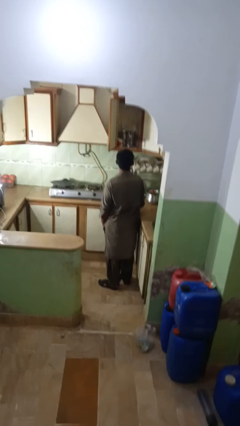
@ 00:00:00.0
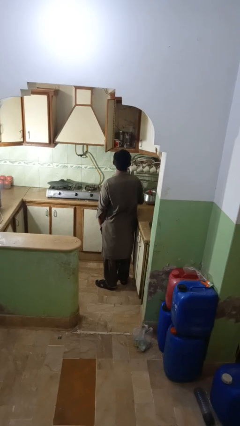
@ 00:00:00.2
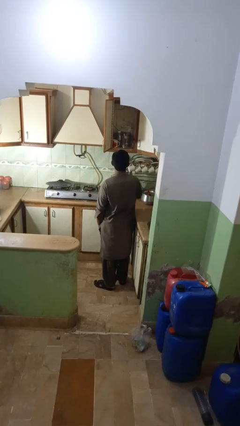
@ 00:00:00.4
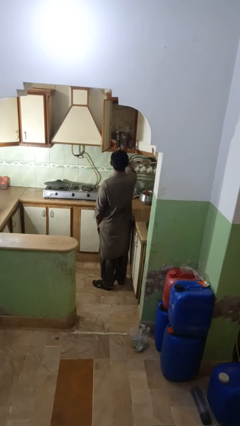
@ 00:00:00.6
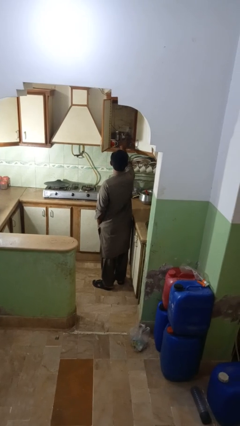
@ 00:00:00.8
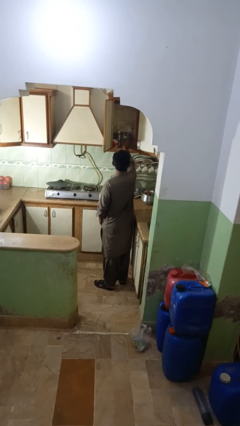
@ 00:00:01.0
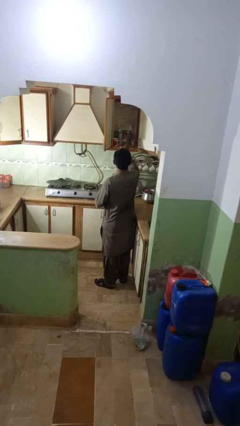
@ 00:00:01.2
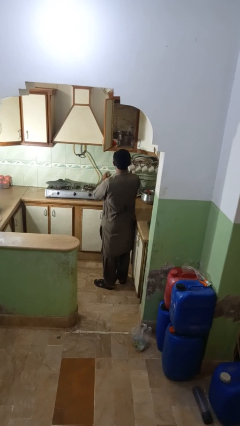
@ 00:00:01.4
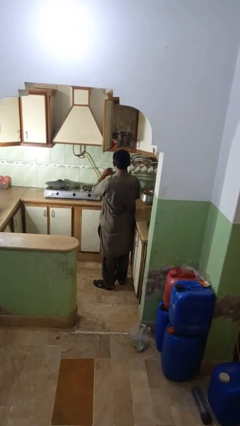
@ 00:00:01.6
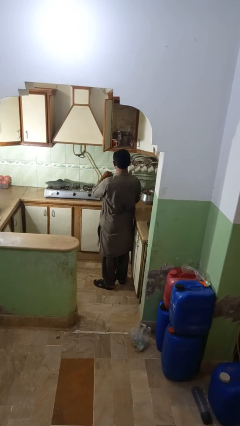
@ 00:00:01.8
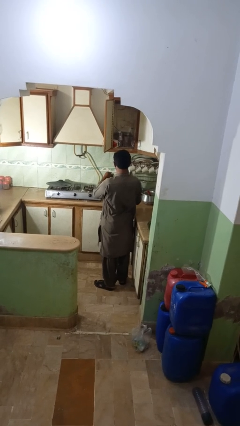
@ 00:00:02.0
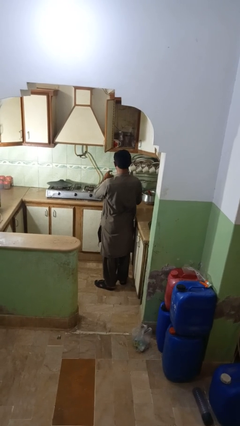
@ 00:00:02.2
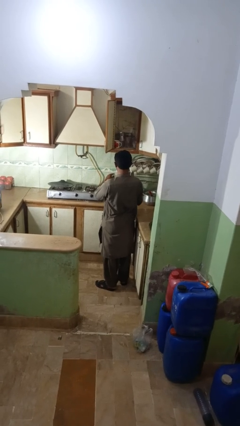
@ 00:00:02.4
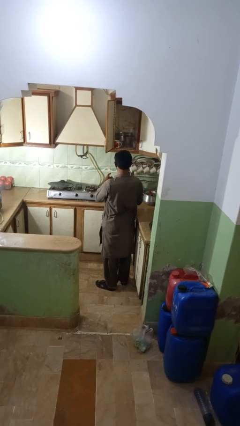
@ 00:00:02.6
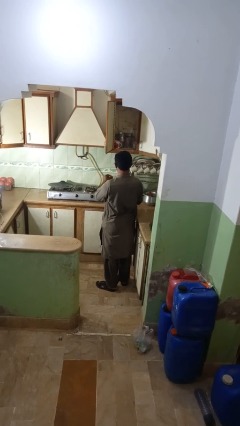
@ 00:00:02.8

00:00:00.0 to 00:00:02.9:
person takes object from kitchen drawer

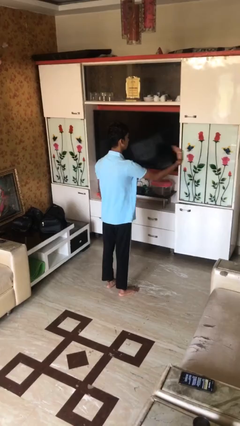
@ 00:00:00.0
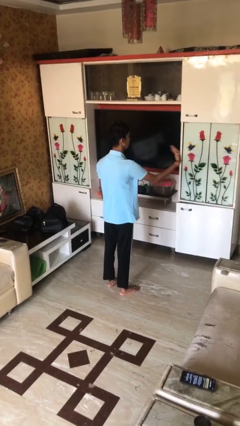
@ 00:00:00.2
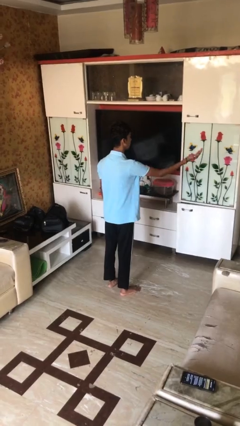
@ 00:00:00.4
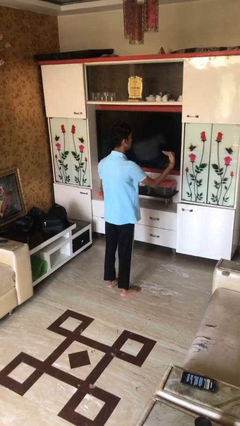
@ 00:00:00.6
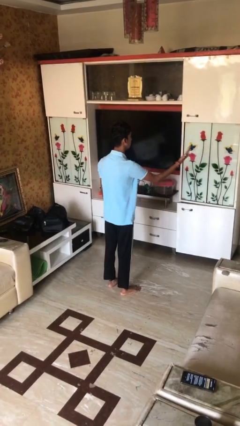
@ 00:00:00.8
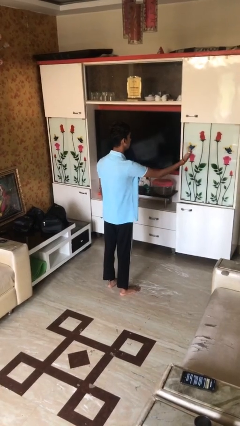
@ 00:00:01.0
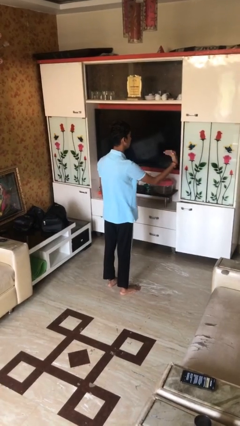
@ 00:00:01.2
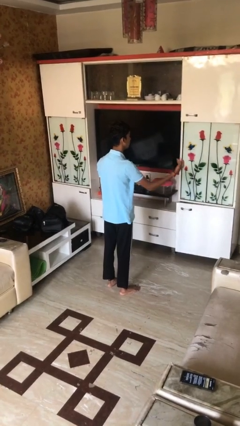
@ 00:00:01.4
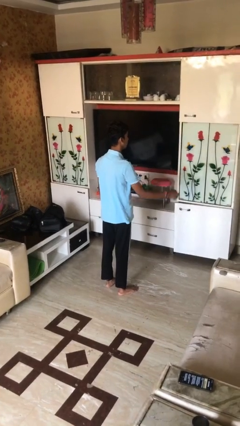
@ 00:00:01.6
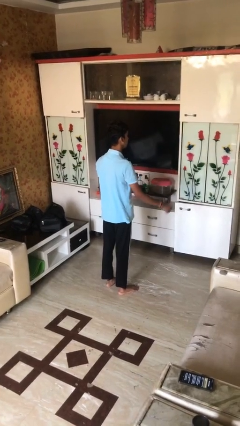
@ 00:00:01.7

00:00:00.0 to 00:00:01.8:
person gestures come here

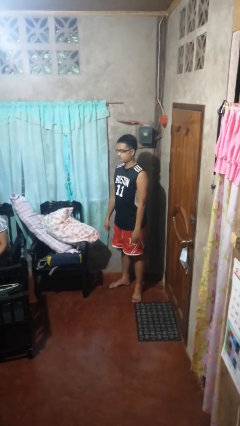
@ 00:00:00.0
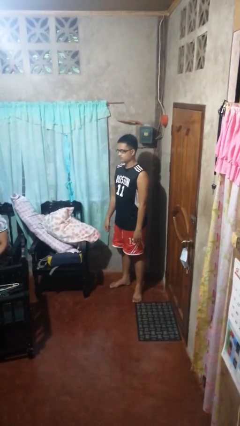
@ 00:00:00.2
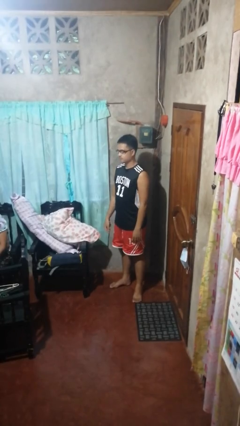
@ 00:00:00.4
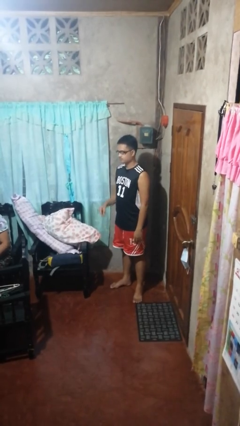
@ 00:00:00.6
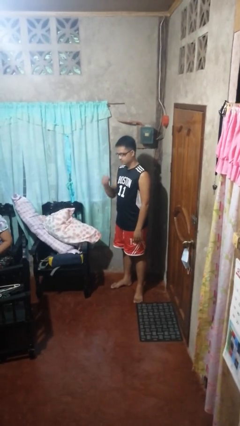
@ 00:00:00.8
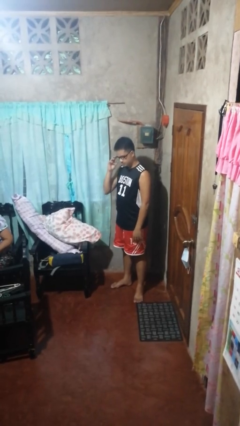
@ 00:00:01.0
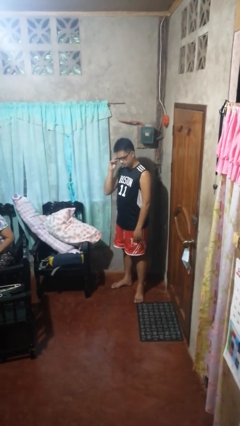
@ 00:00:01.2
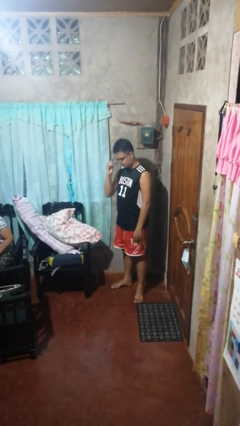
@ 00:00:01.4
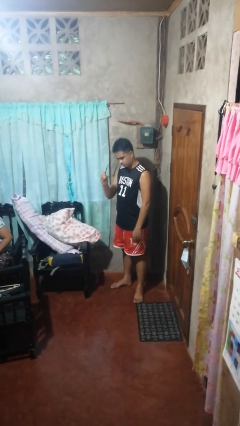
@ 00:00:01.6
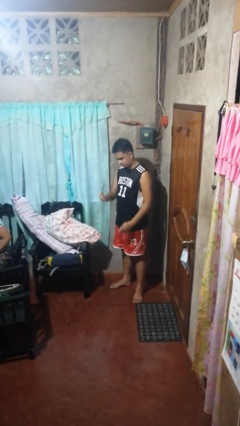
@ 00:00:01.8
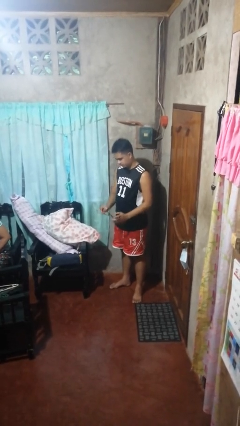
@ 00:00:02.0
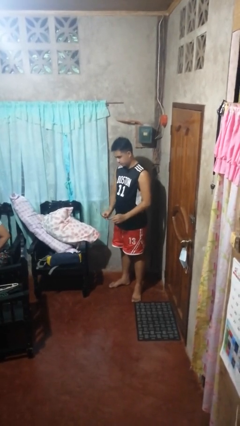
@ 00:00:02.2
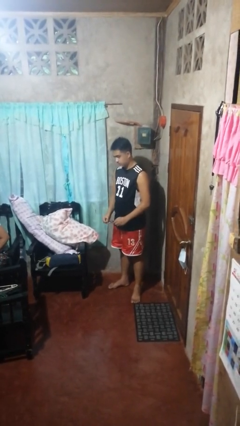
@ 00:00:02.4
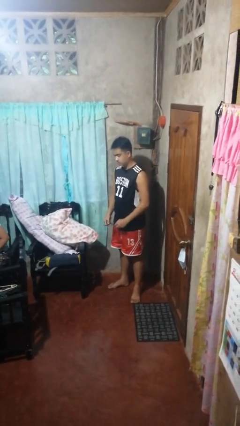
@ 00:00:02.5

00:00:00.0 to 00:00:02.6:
person takes off glasses

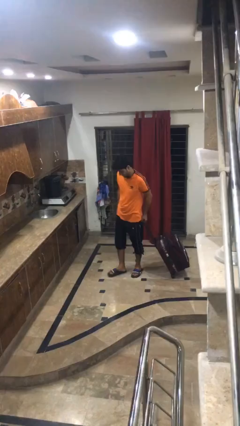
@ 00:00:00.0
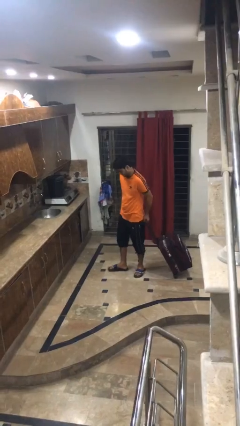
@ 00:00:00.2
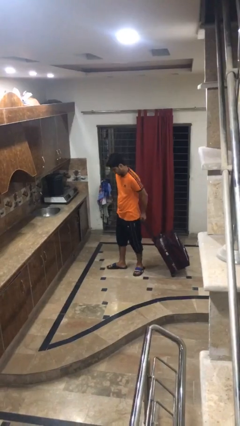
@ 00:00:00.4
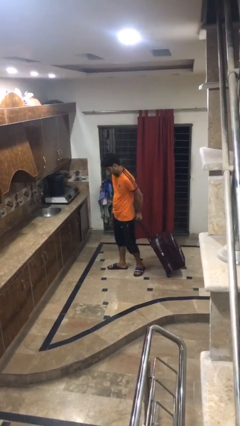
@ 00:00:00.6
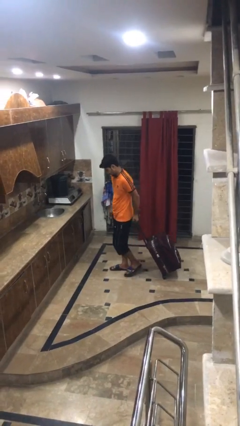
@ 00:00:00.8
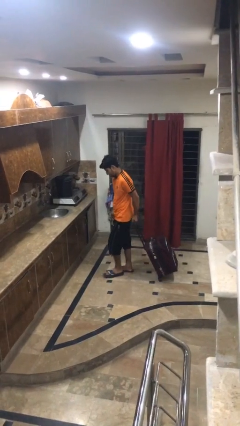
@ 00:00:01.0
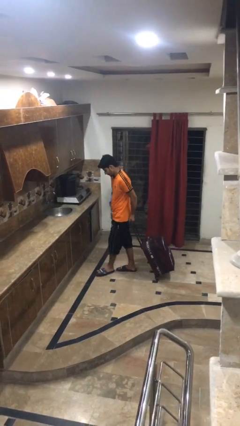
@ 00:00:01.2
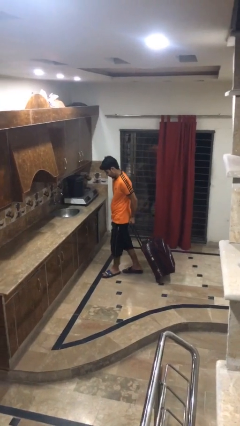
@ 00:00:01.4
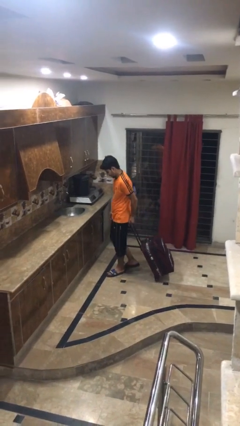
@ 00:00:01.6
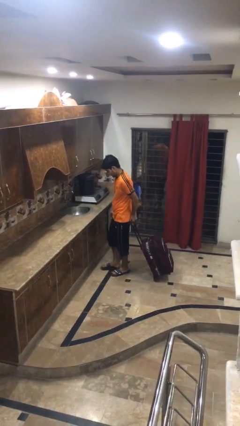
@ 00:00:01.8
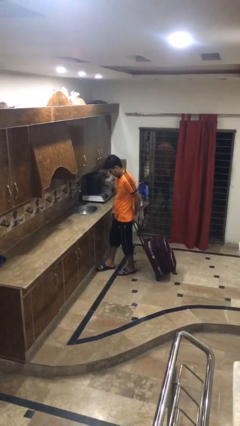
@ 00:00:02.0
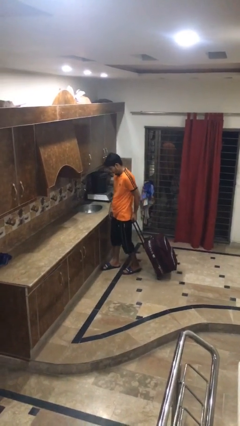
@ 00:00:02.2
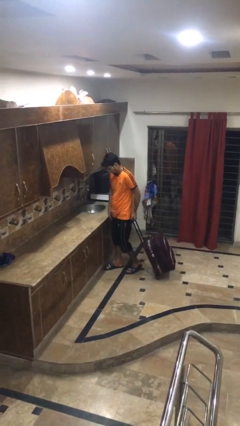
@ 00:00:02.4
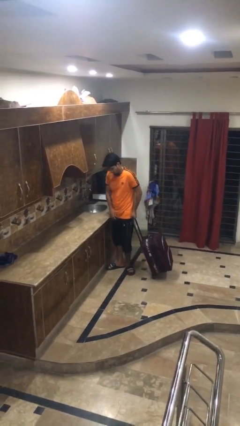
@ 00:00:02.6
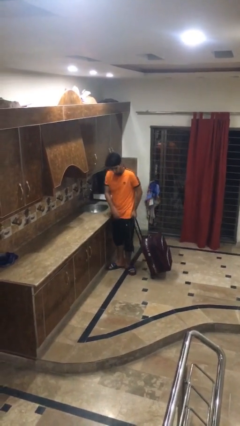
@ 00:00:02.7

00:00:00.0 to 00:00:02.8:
person pulls wheeled cart

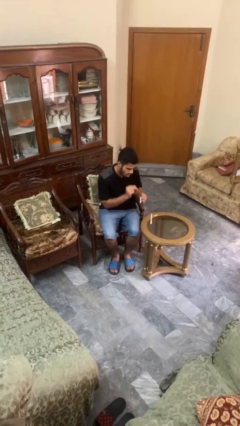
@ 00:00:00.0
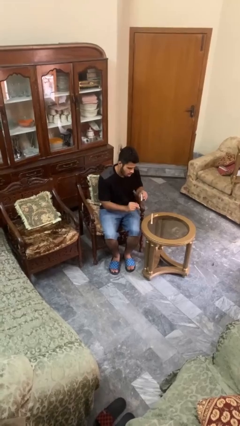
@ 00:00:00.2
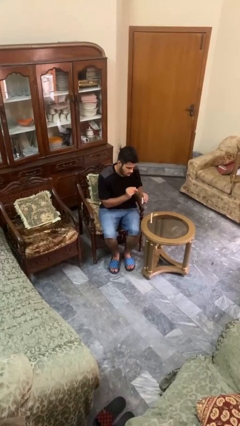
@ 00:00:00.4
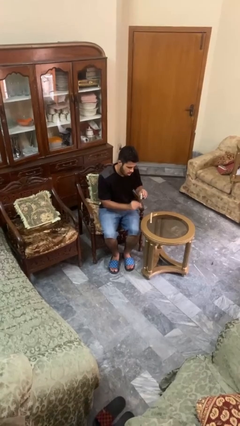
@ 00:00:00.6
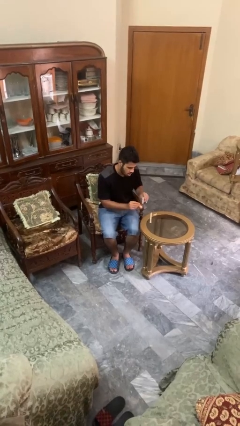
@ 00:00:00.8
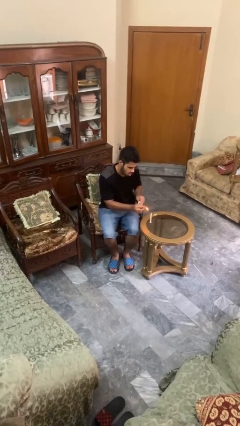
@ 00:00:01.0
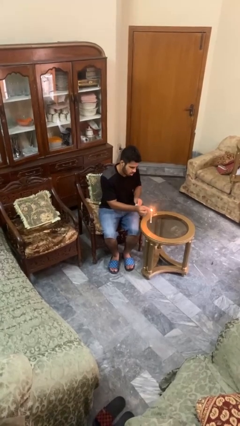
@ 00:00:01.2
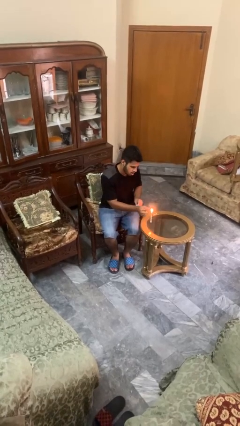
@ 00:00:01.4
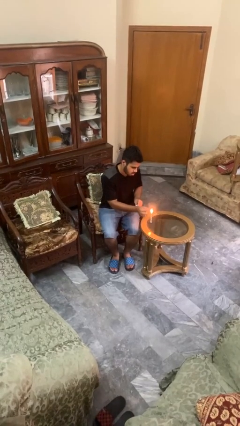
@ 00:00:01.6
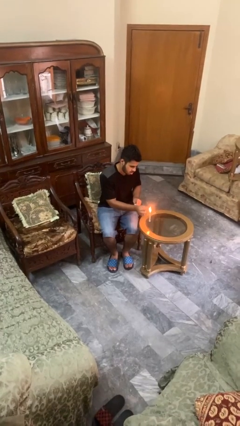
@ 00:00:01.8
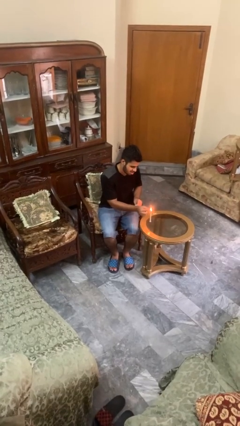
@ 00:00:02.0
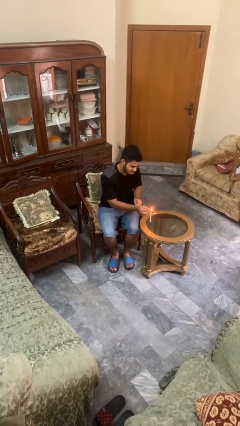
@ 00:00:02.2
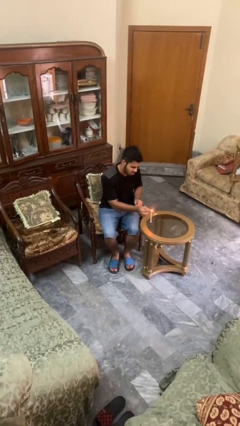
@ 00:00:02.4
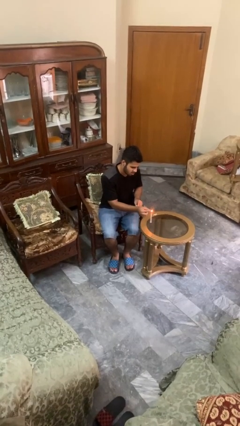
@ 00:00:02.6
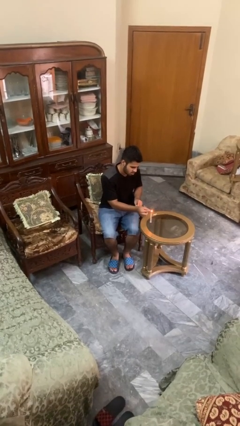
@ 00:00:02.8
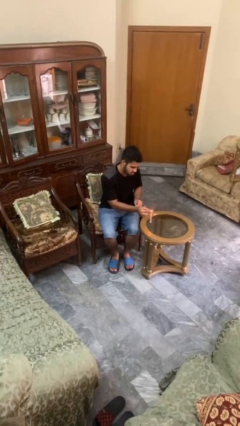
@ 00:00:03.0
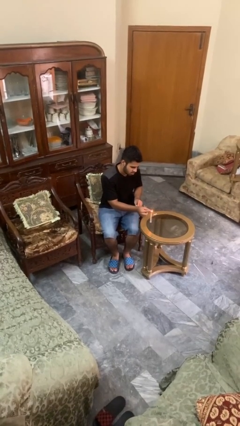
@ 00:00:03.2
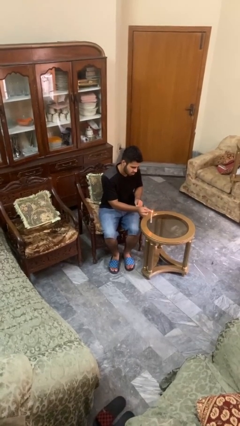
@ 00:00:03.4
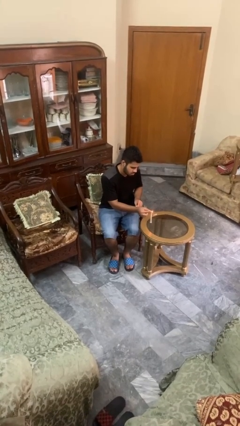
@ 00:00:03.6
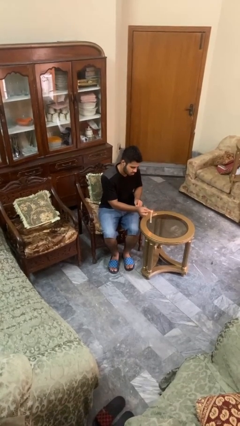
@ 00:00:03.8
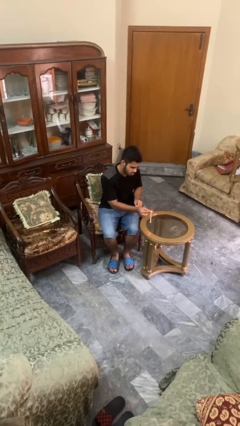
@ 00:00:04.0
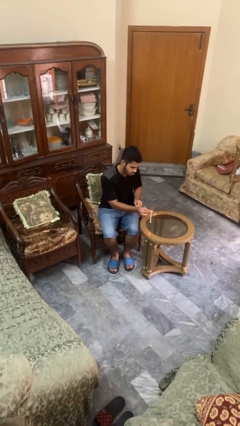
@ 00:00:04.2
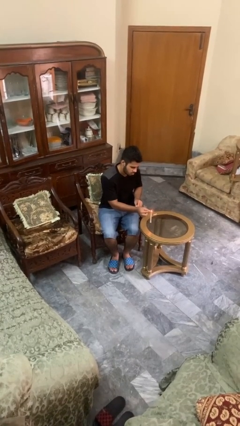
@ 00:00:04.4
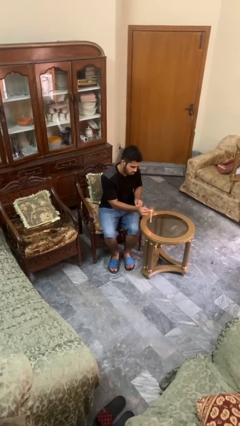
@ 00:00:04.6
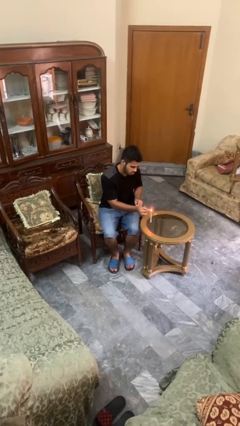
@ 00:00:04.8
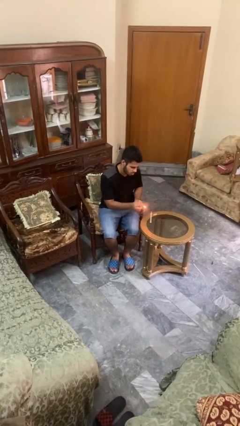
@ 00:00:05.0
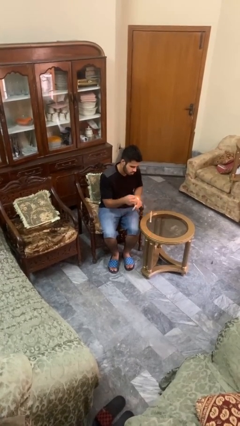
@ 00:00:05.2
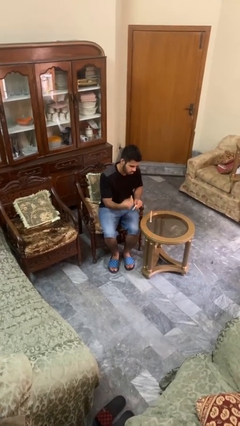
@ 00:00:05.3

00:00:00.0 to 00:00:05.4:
person lights candle

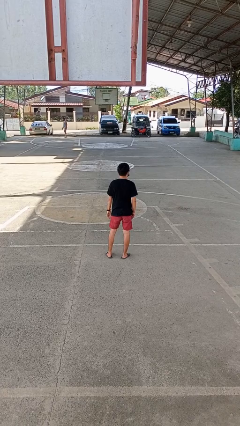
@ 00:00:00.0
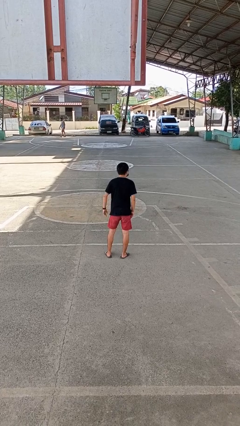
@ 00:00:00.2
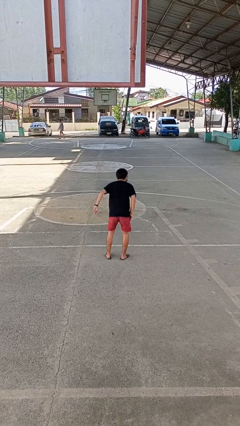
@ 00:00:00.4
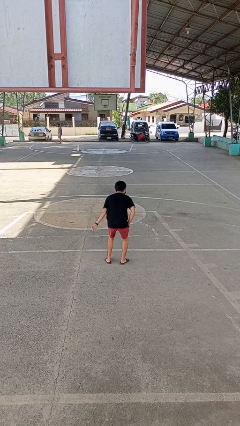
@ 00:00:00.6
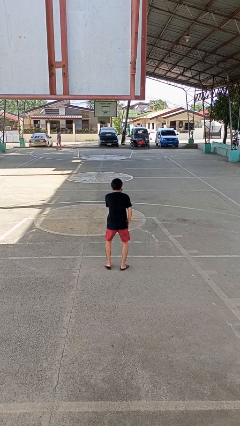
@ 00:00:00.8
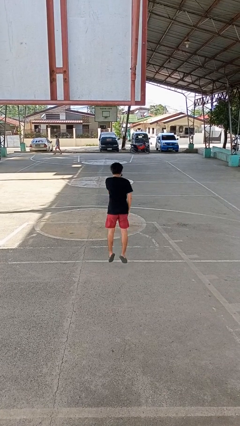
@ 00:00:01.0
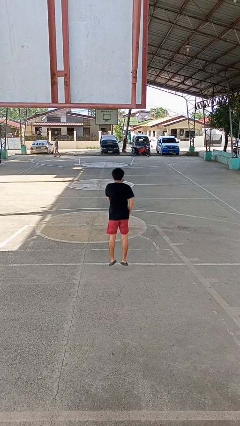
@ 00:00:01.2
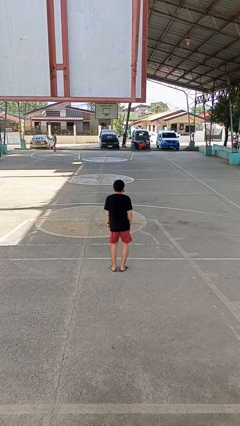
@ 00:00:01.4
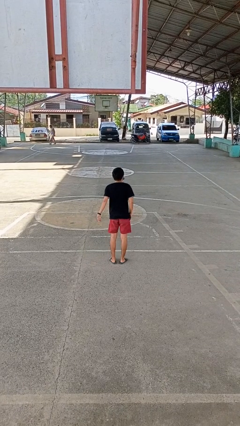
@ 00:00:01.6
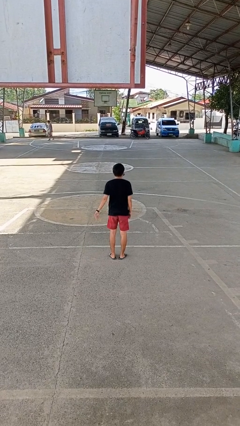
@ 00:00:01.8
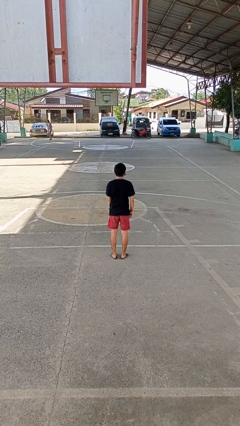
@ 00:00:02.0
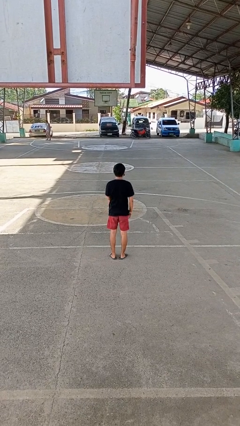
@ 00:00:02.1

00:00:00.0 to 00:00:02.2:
person jumps
